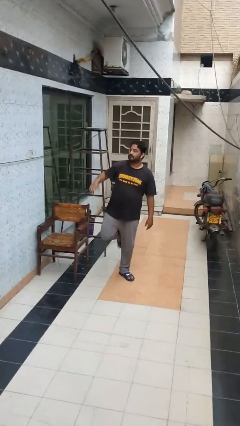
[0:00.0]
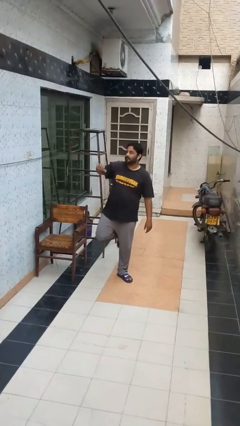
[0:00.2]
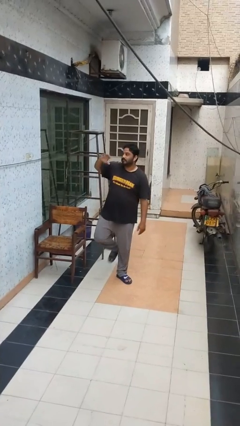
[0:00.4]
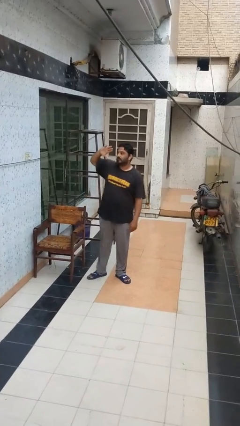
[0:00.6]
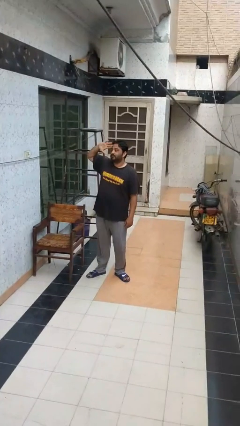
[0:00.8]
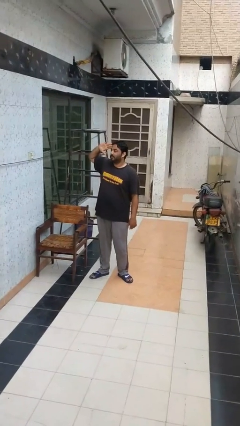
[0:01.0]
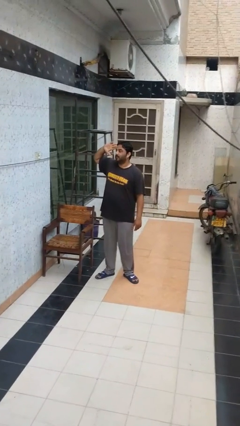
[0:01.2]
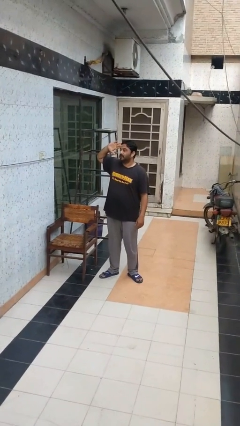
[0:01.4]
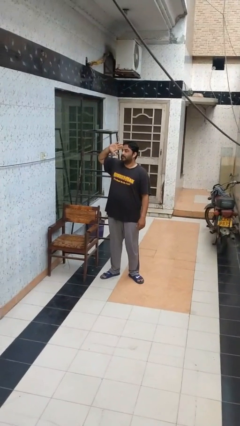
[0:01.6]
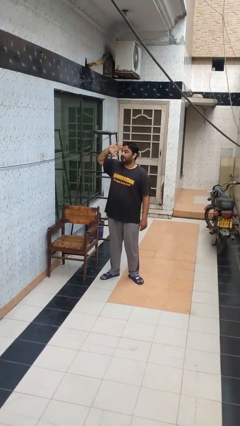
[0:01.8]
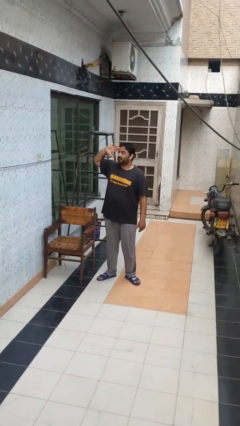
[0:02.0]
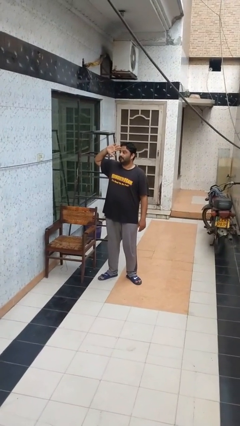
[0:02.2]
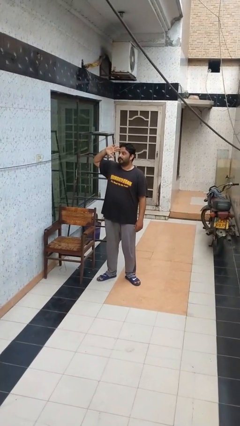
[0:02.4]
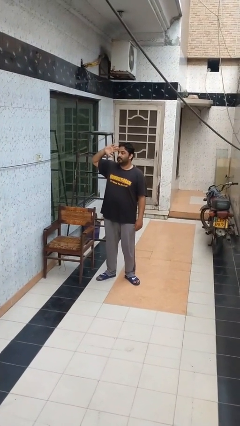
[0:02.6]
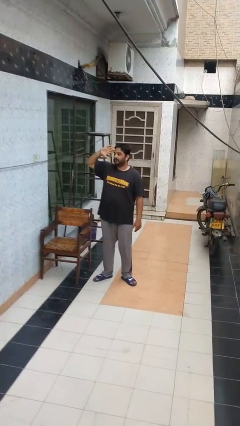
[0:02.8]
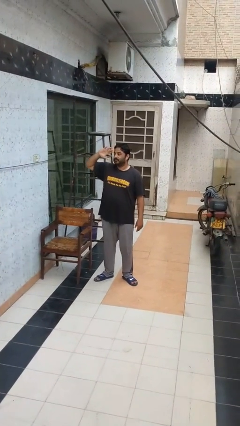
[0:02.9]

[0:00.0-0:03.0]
person salutes

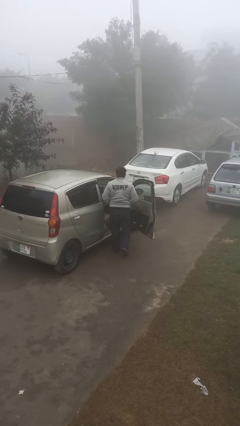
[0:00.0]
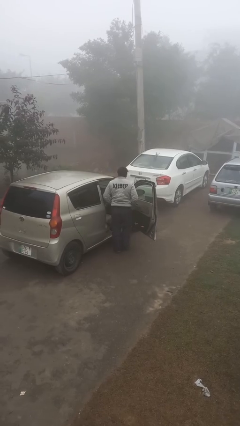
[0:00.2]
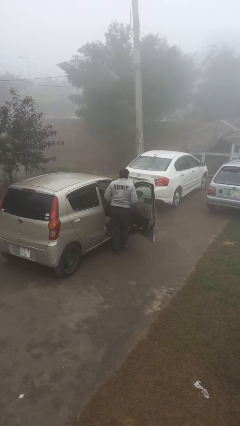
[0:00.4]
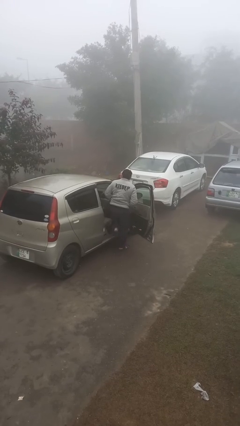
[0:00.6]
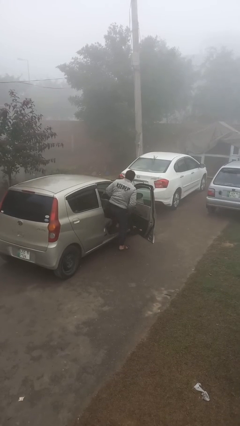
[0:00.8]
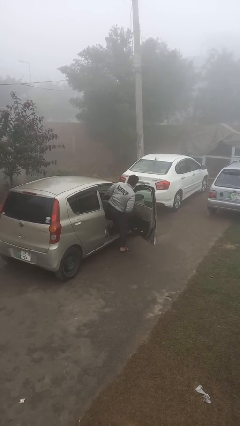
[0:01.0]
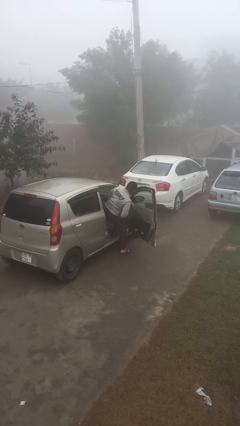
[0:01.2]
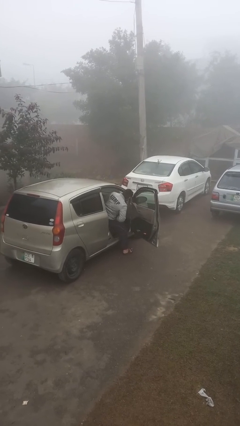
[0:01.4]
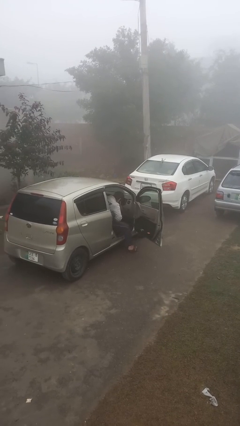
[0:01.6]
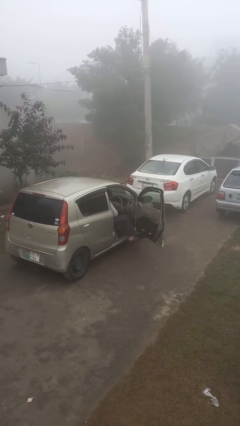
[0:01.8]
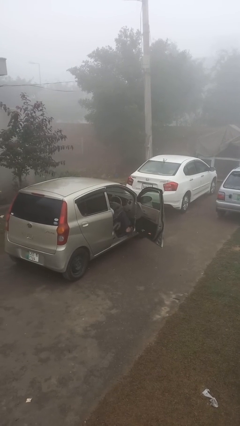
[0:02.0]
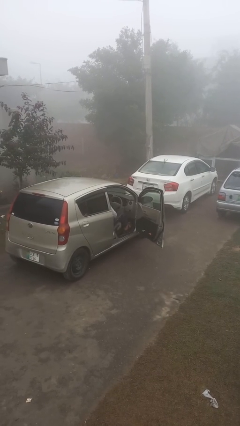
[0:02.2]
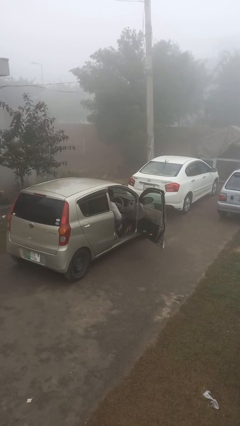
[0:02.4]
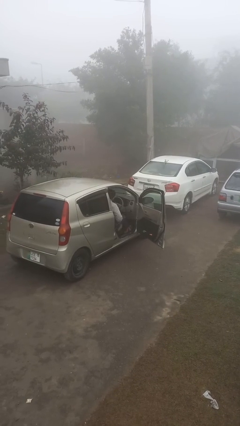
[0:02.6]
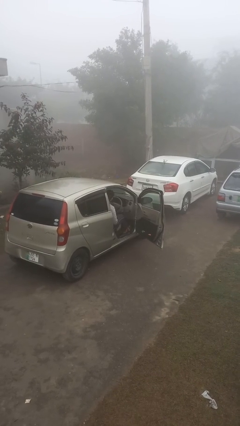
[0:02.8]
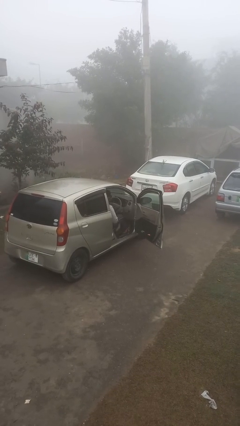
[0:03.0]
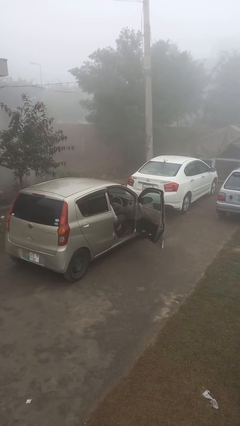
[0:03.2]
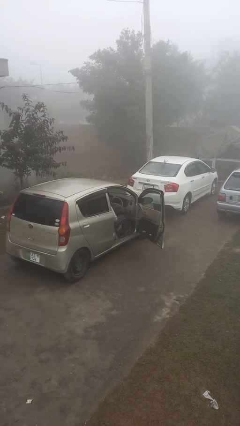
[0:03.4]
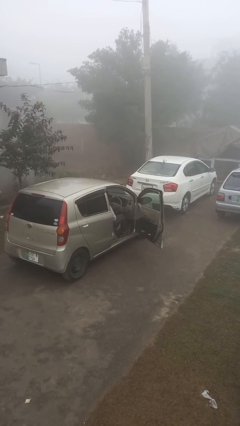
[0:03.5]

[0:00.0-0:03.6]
person enters car

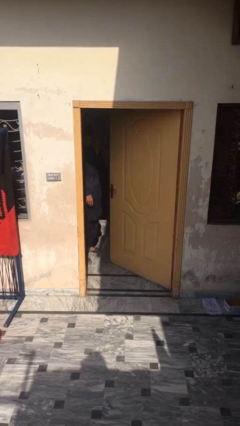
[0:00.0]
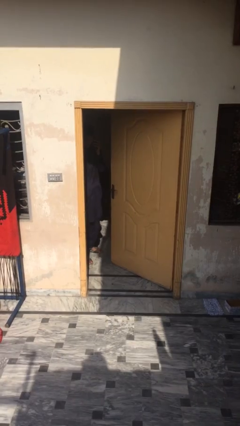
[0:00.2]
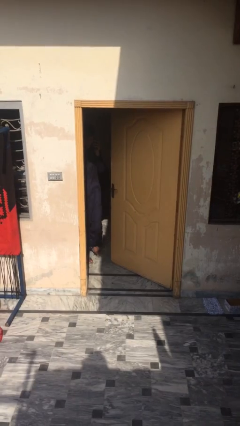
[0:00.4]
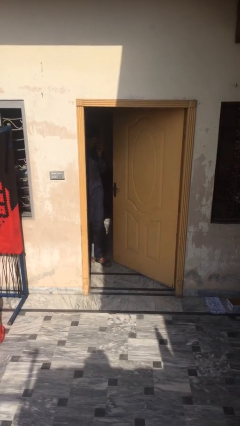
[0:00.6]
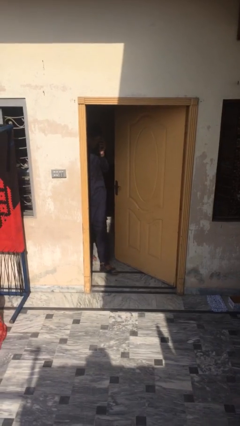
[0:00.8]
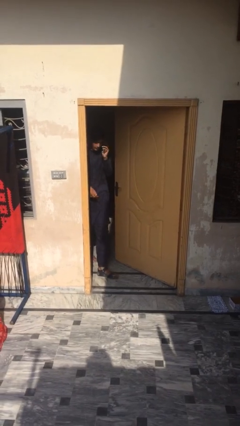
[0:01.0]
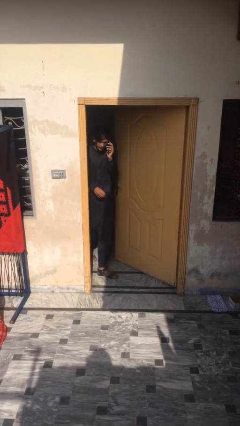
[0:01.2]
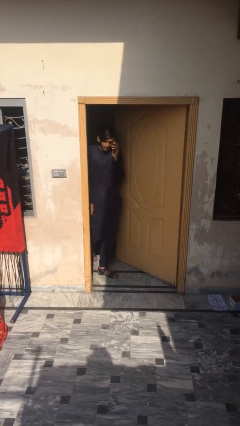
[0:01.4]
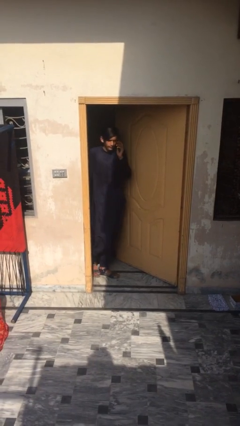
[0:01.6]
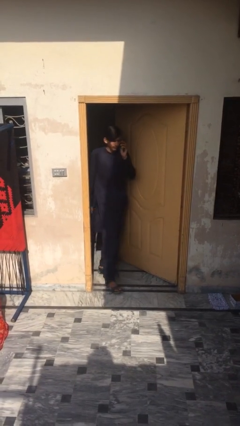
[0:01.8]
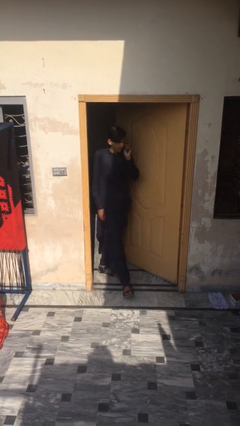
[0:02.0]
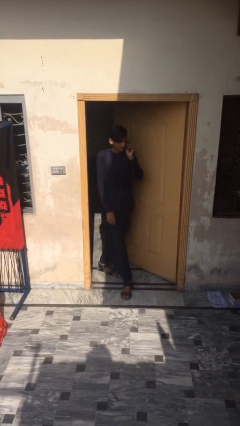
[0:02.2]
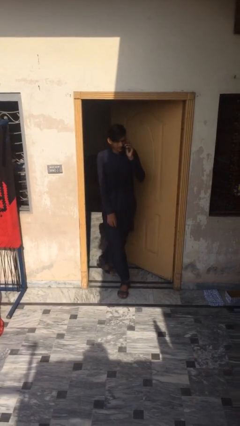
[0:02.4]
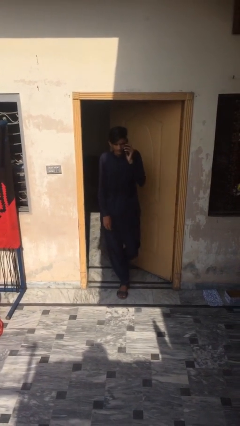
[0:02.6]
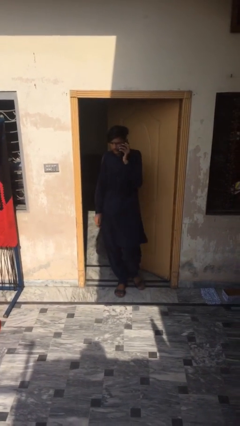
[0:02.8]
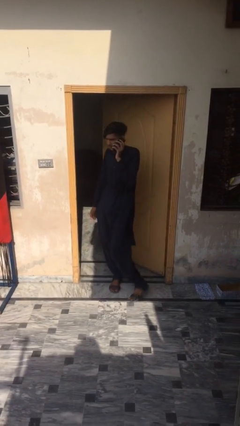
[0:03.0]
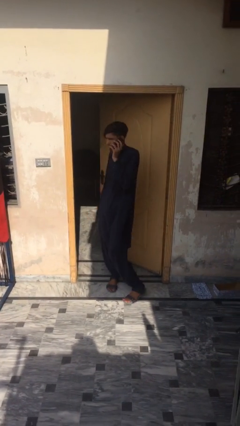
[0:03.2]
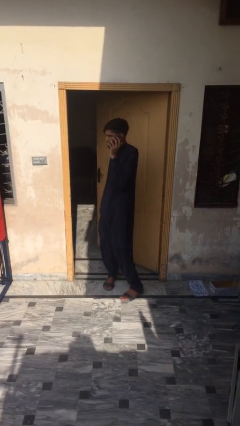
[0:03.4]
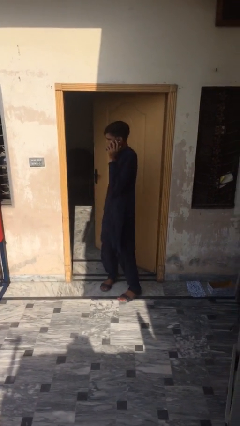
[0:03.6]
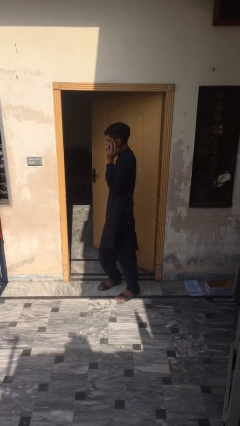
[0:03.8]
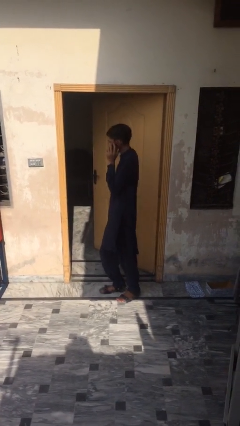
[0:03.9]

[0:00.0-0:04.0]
person enters scene through structure

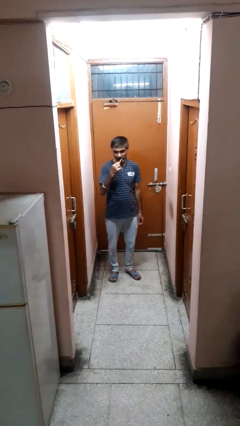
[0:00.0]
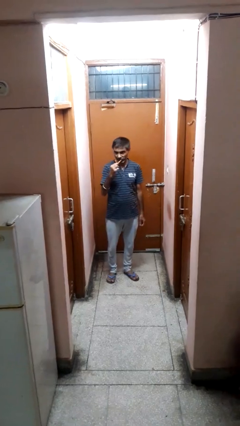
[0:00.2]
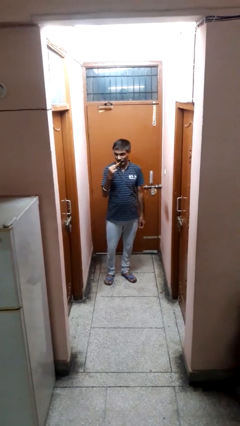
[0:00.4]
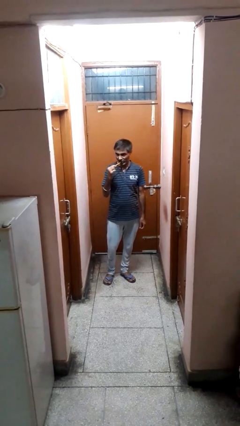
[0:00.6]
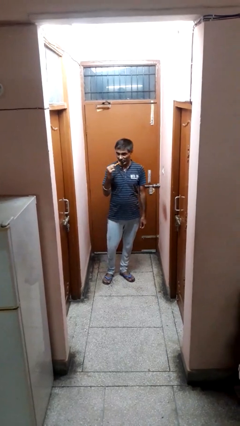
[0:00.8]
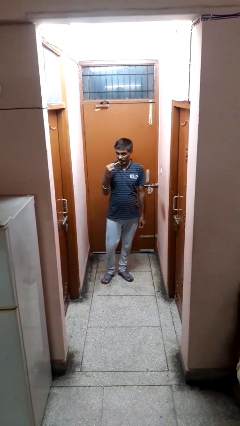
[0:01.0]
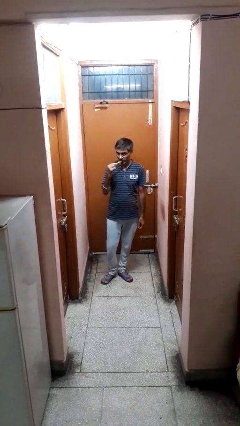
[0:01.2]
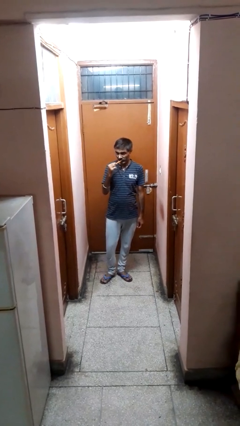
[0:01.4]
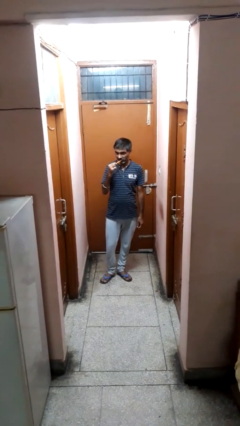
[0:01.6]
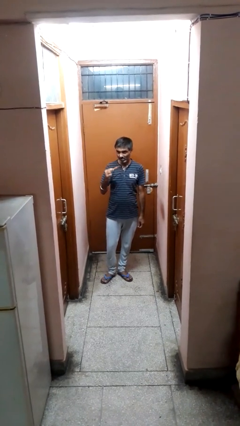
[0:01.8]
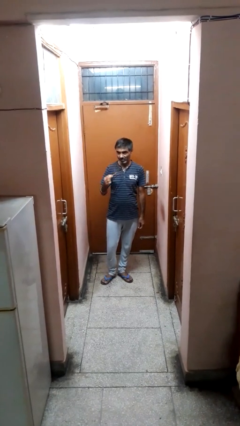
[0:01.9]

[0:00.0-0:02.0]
person brushes teeth

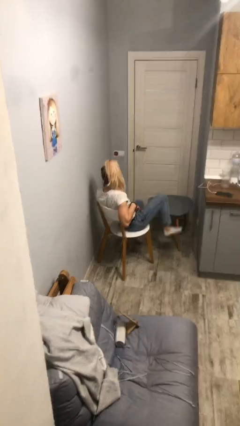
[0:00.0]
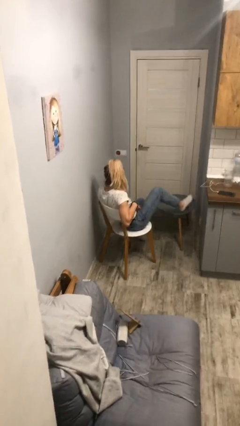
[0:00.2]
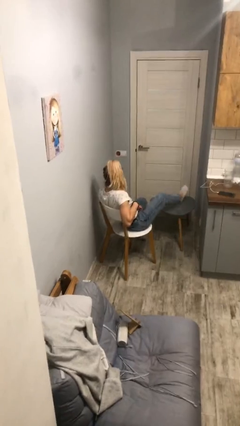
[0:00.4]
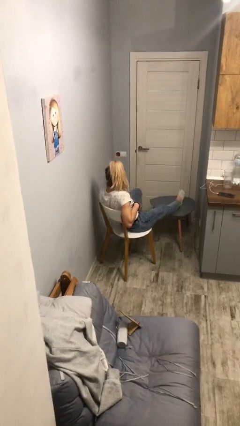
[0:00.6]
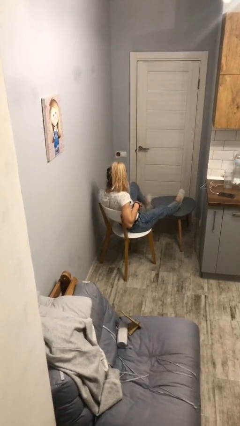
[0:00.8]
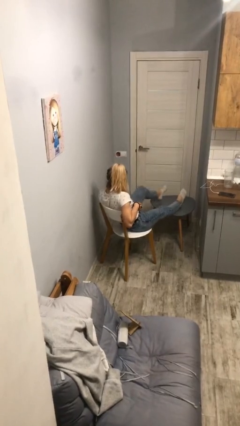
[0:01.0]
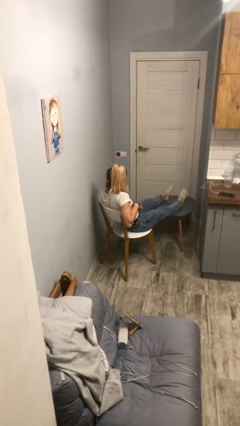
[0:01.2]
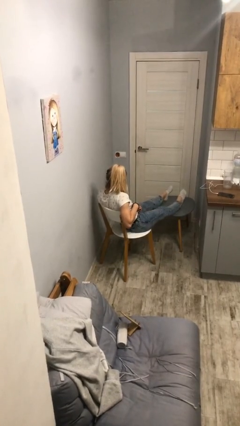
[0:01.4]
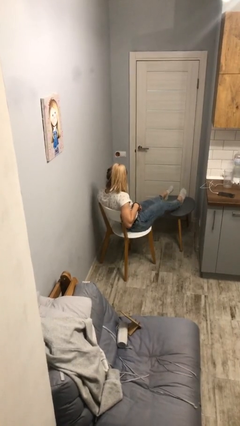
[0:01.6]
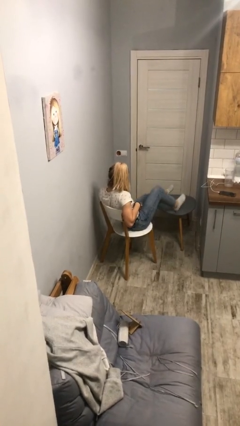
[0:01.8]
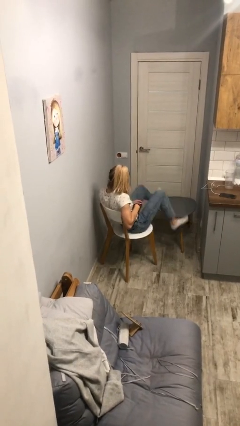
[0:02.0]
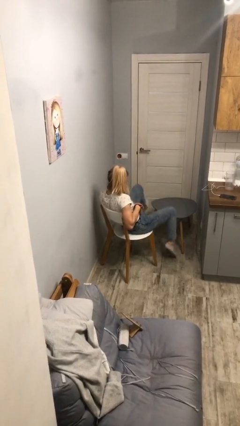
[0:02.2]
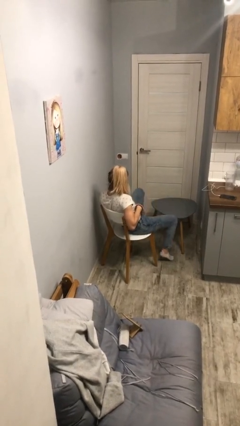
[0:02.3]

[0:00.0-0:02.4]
person puts feet up

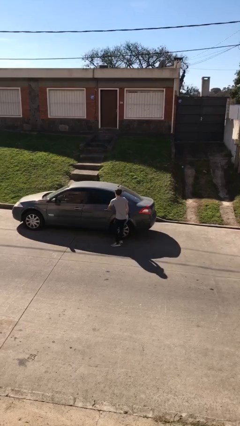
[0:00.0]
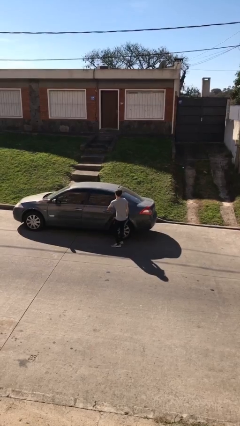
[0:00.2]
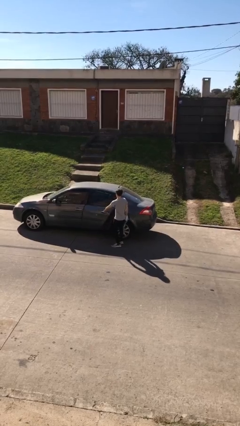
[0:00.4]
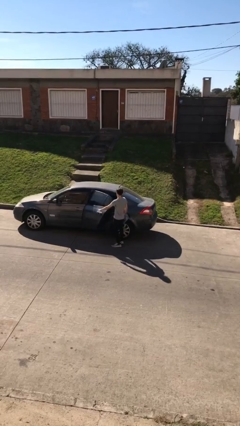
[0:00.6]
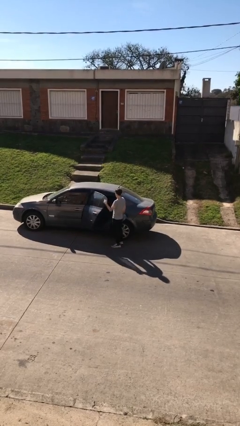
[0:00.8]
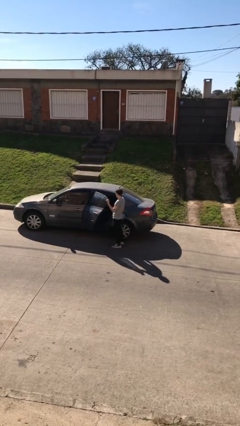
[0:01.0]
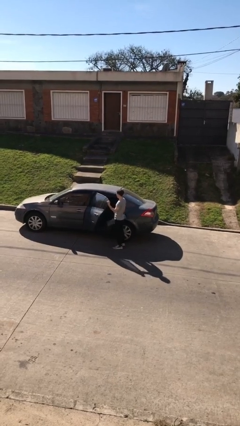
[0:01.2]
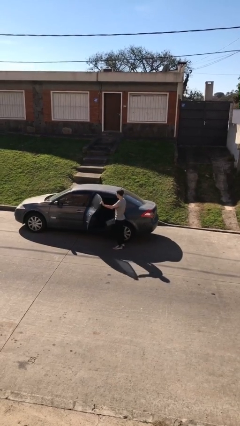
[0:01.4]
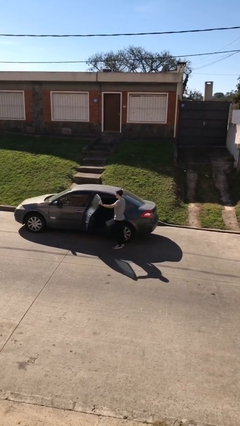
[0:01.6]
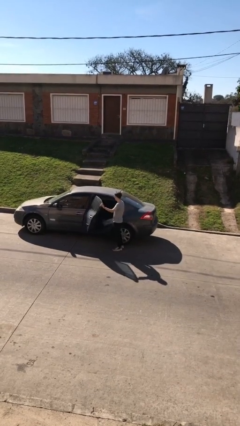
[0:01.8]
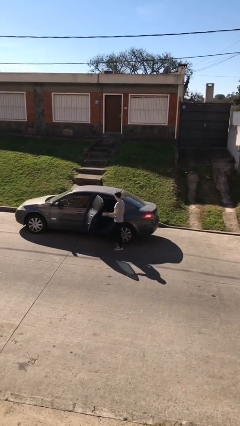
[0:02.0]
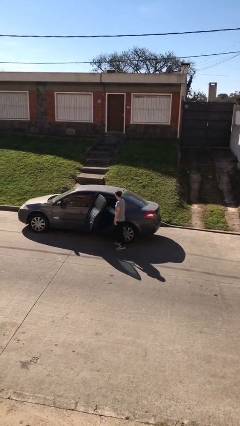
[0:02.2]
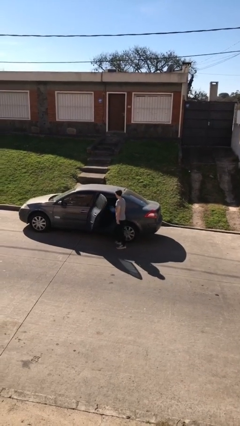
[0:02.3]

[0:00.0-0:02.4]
person opens car door

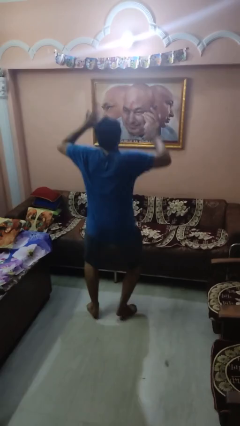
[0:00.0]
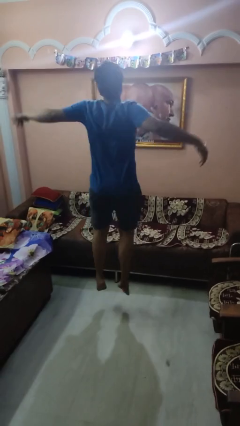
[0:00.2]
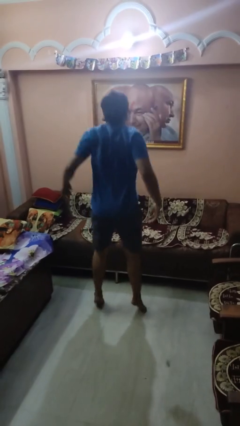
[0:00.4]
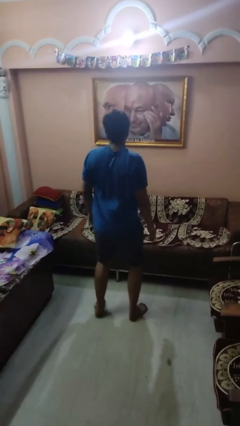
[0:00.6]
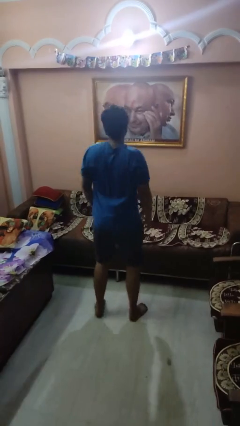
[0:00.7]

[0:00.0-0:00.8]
person jumps
